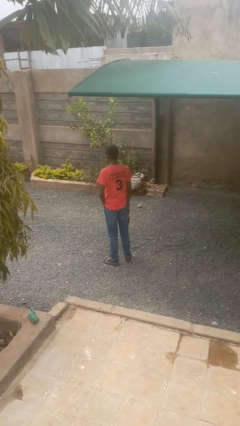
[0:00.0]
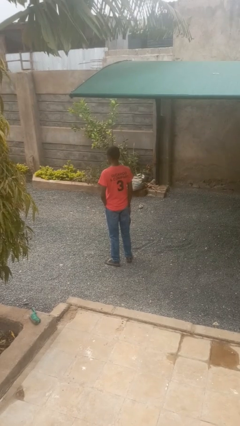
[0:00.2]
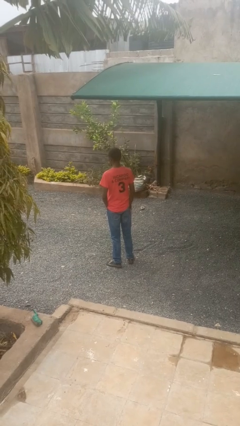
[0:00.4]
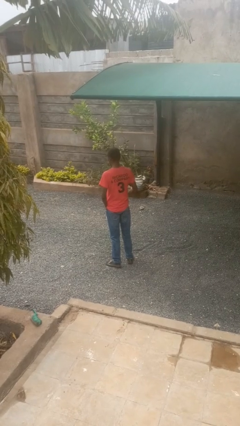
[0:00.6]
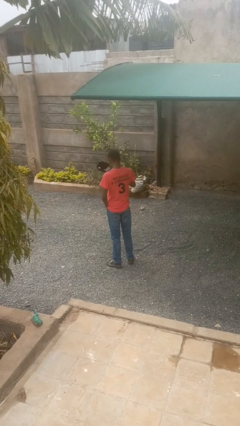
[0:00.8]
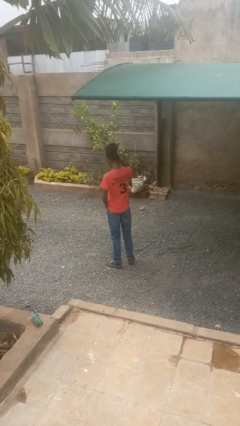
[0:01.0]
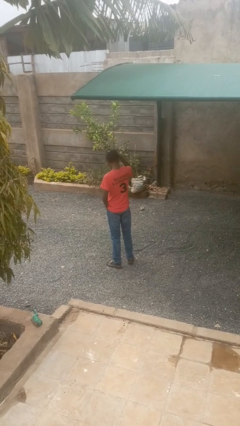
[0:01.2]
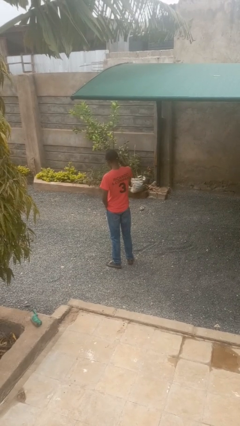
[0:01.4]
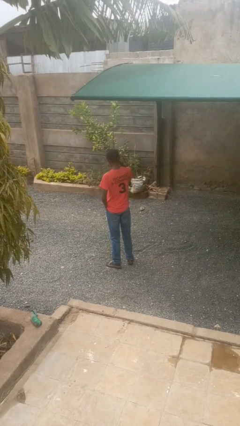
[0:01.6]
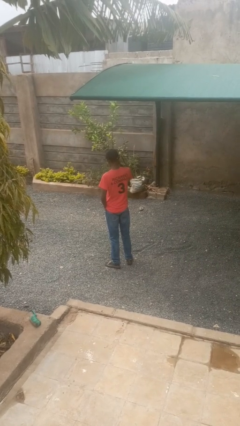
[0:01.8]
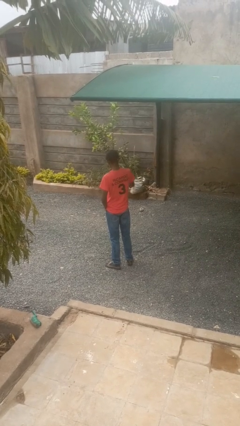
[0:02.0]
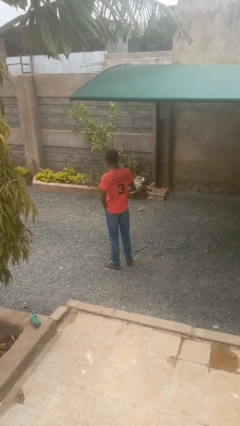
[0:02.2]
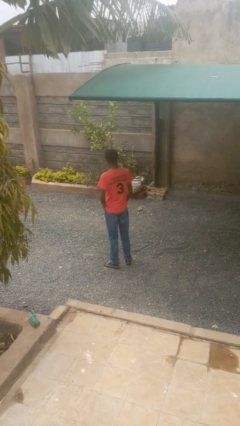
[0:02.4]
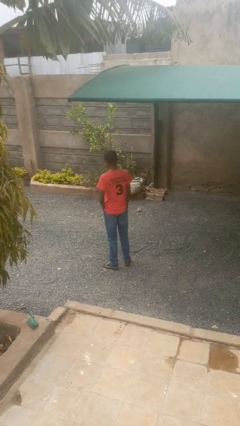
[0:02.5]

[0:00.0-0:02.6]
person puts on hat

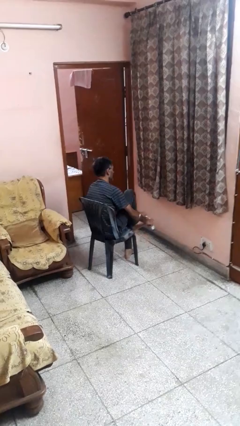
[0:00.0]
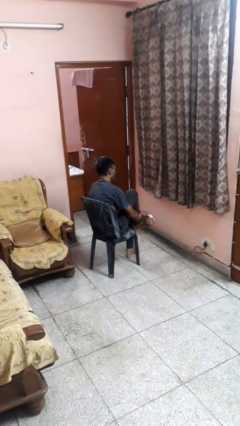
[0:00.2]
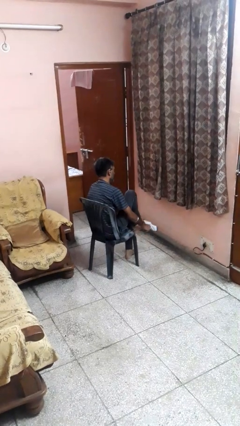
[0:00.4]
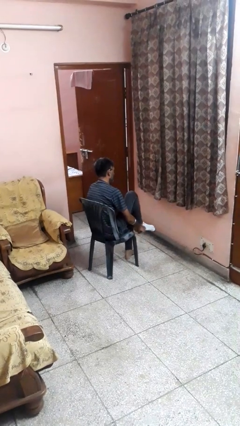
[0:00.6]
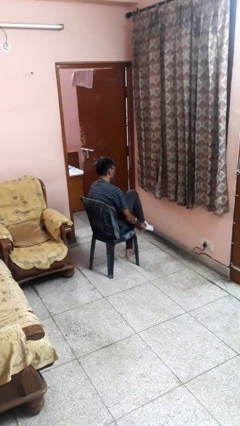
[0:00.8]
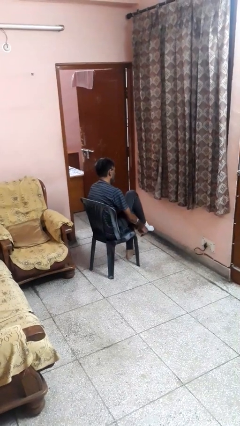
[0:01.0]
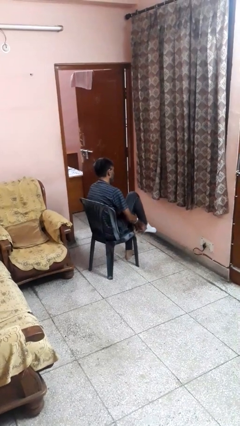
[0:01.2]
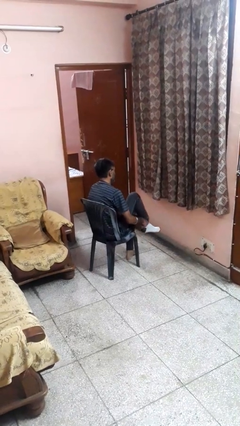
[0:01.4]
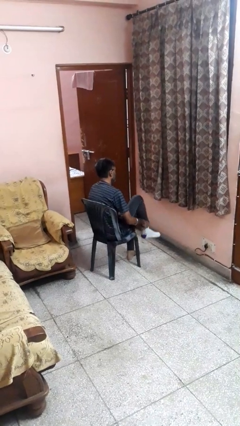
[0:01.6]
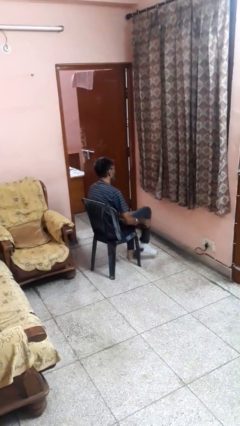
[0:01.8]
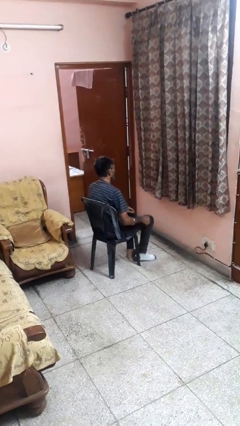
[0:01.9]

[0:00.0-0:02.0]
person puts on socks

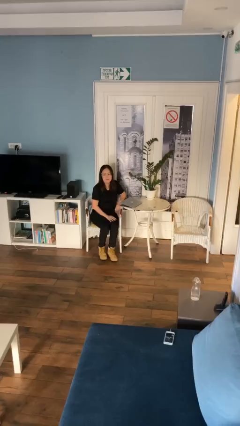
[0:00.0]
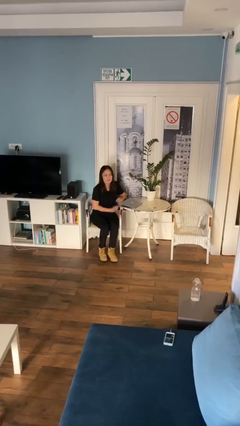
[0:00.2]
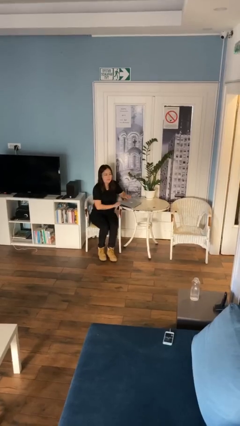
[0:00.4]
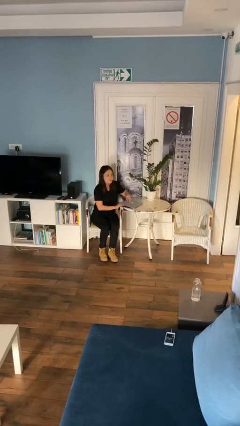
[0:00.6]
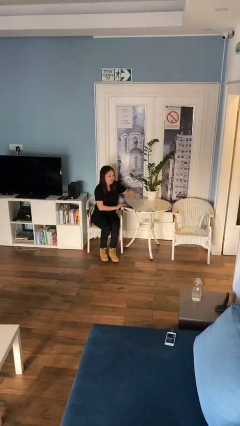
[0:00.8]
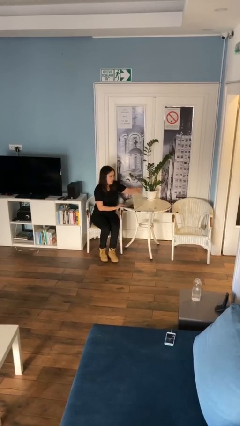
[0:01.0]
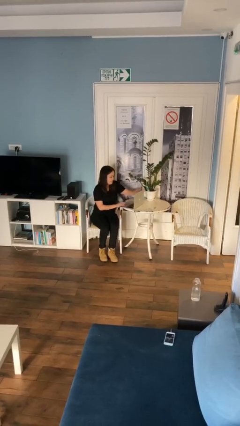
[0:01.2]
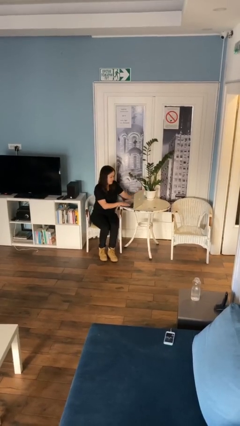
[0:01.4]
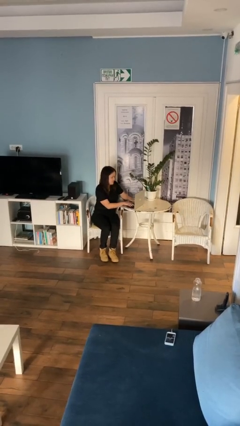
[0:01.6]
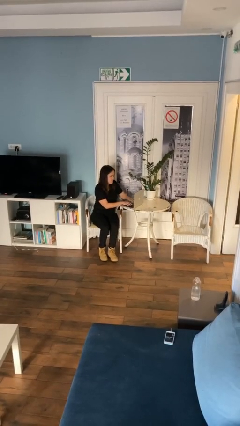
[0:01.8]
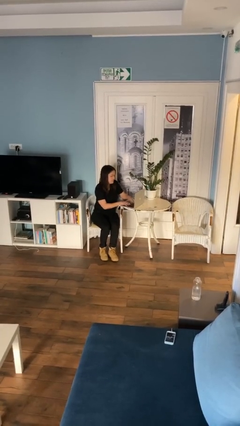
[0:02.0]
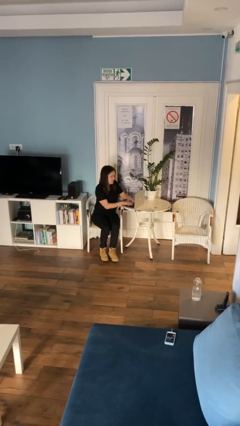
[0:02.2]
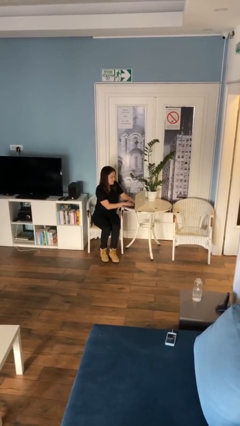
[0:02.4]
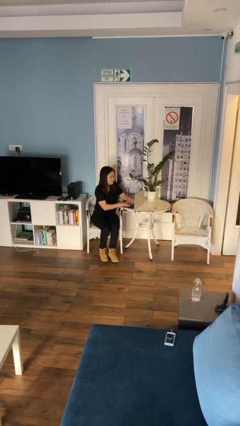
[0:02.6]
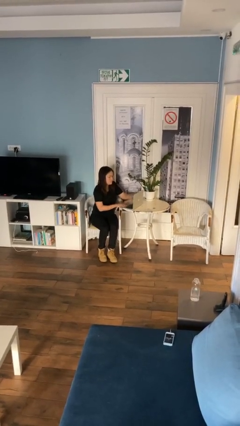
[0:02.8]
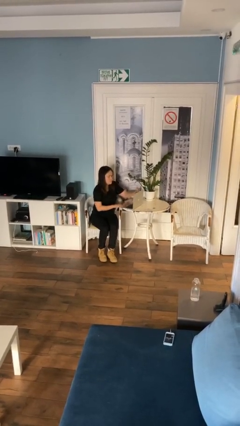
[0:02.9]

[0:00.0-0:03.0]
person interacts with laptop

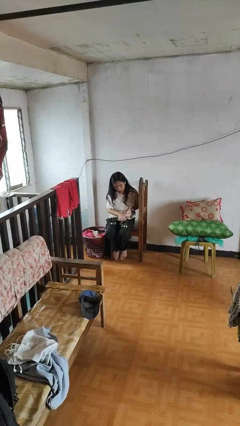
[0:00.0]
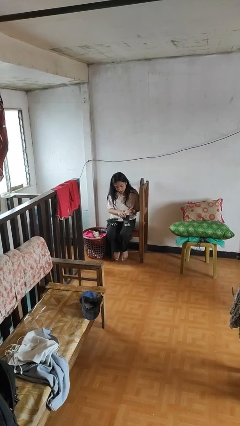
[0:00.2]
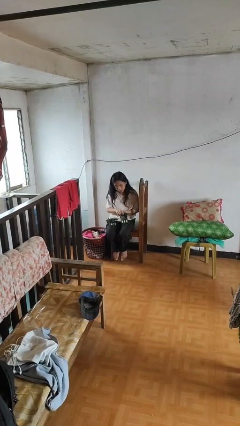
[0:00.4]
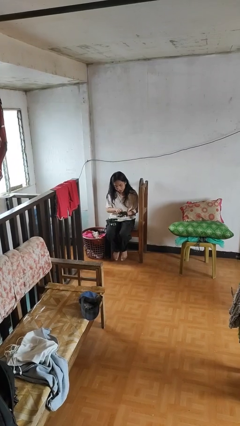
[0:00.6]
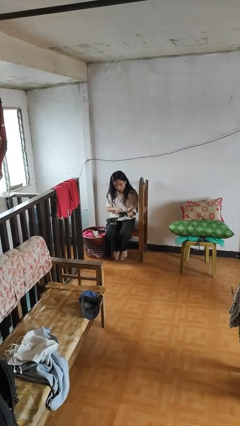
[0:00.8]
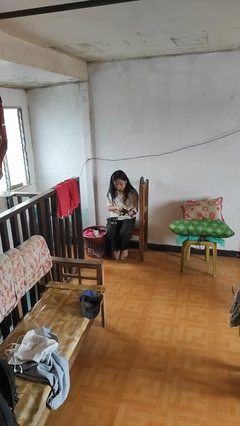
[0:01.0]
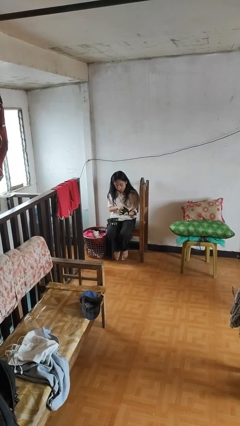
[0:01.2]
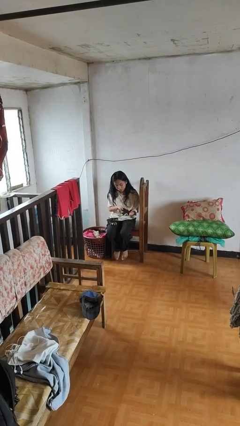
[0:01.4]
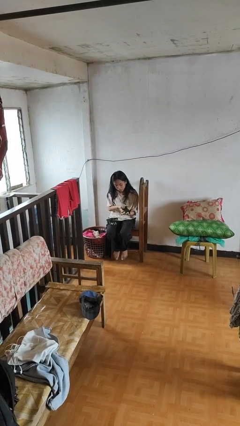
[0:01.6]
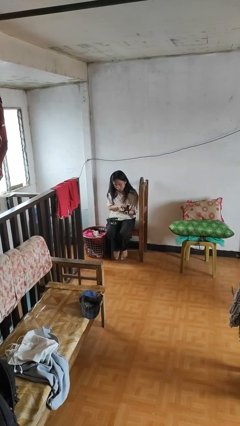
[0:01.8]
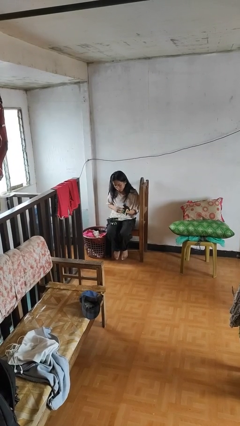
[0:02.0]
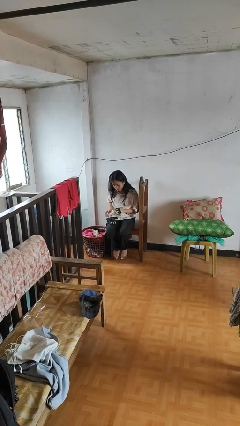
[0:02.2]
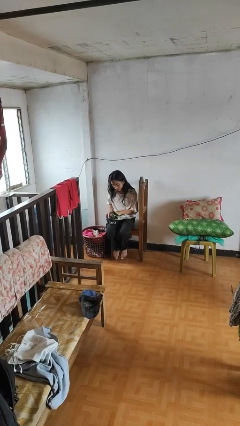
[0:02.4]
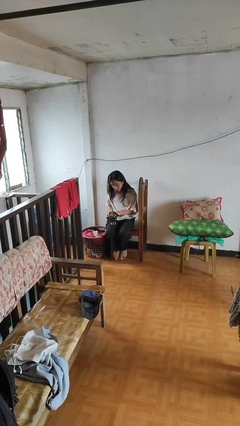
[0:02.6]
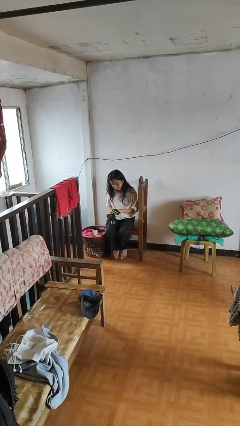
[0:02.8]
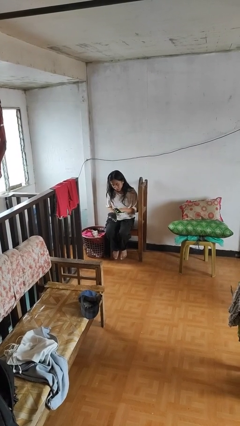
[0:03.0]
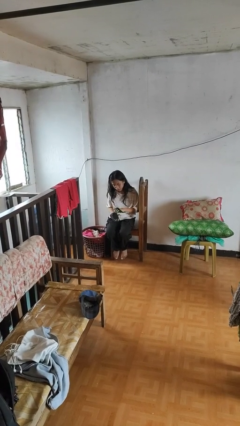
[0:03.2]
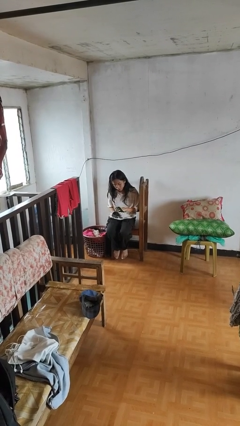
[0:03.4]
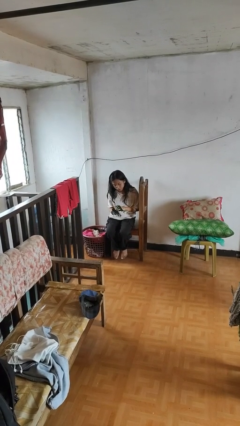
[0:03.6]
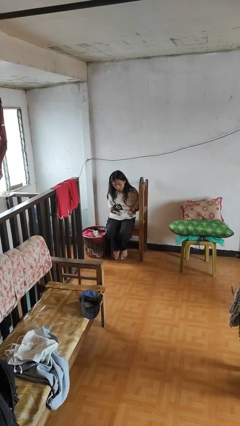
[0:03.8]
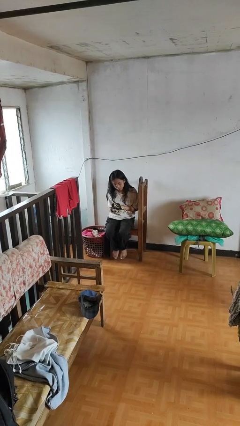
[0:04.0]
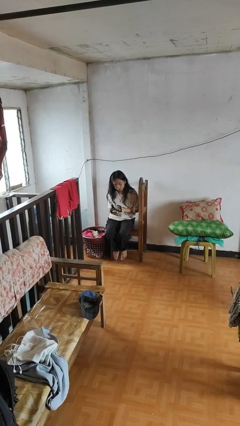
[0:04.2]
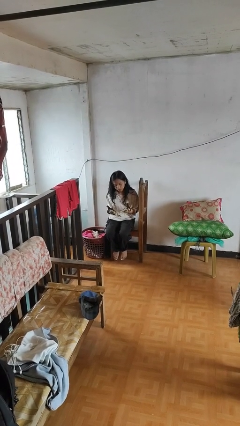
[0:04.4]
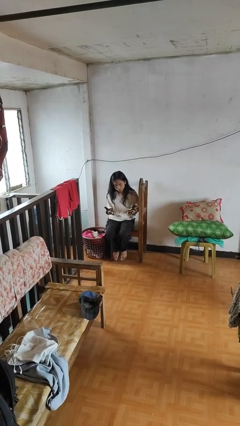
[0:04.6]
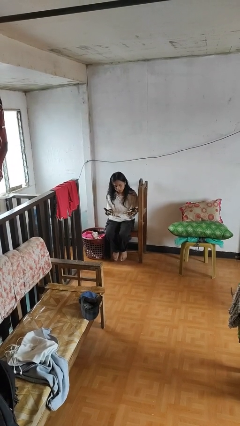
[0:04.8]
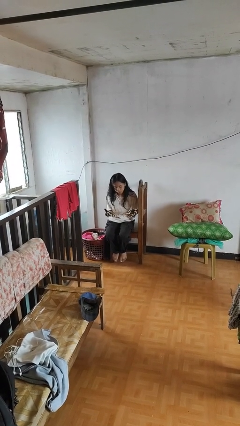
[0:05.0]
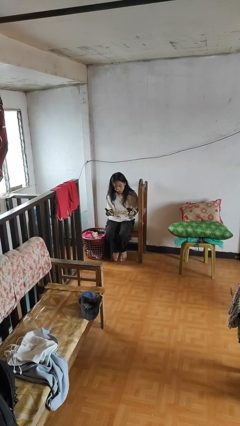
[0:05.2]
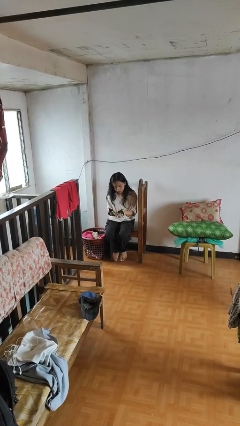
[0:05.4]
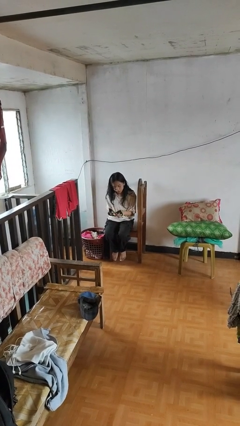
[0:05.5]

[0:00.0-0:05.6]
person puts on gloves

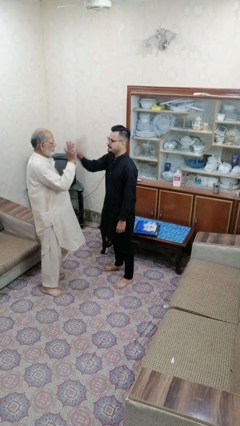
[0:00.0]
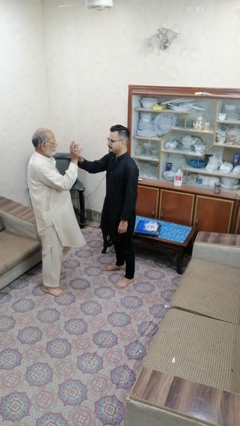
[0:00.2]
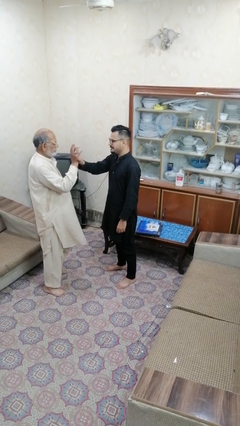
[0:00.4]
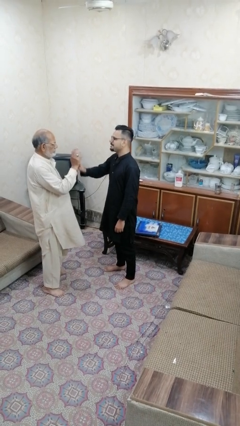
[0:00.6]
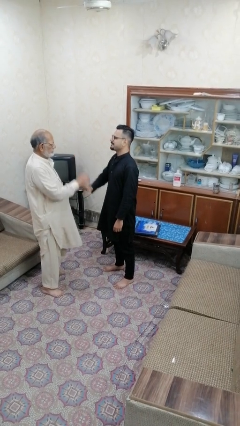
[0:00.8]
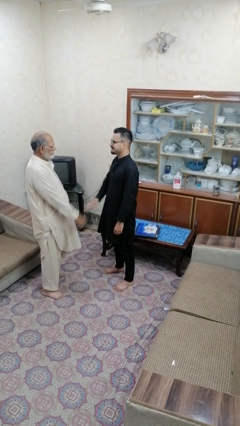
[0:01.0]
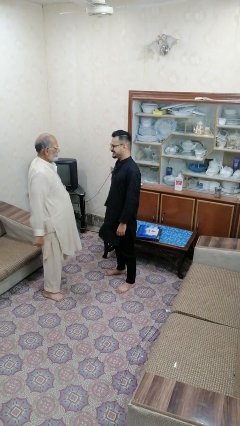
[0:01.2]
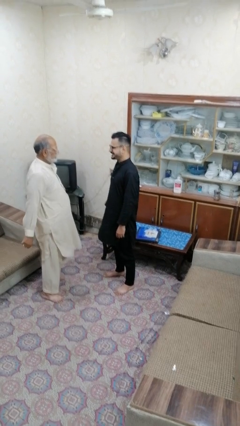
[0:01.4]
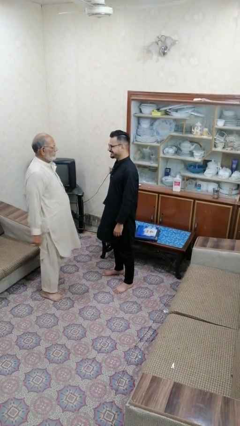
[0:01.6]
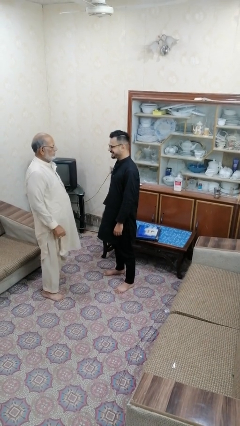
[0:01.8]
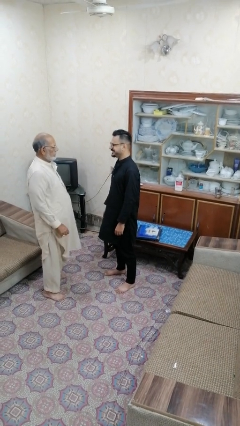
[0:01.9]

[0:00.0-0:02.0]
person highfives hand

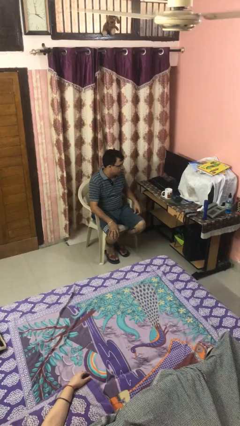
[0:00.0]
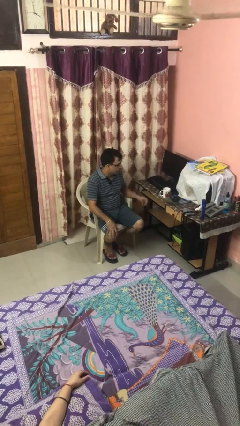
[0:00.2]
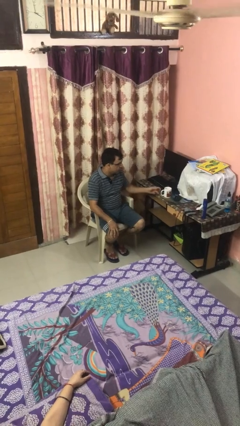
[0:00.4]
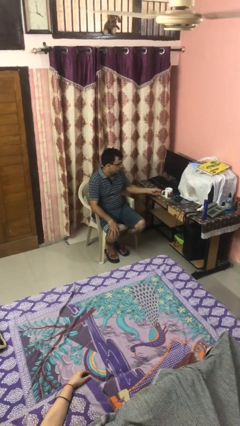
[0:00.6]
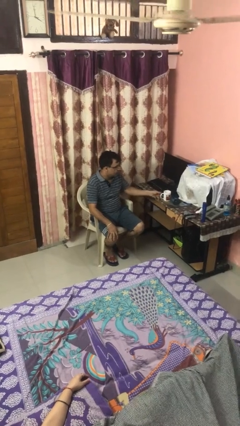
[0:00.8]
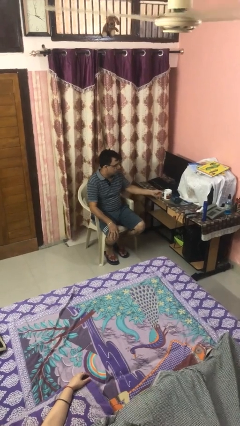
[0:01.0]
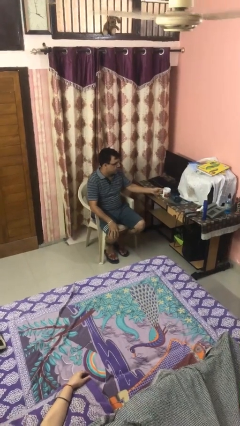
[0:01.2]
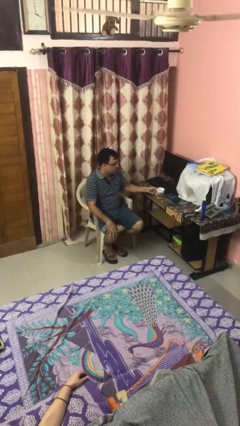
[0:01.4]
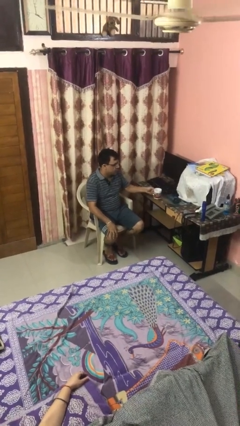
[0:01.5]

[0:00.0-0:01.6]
person picks up object from table

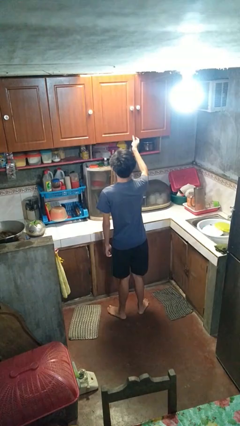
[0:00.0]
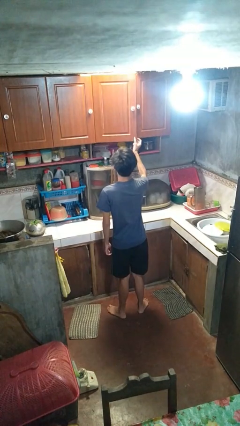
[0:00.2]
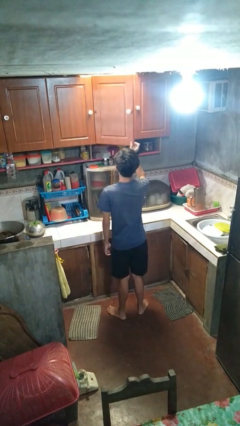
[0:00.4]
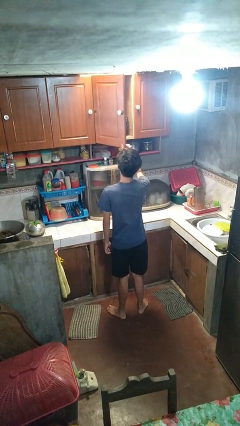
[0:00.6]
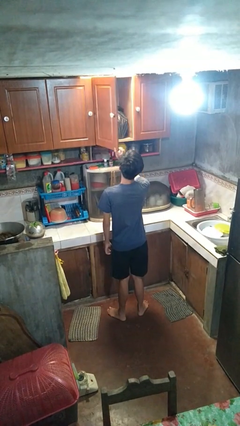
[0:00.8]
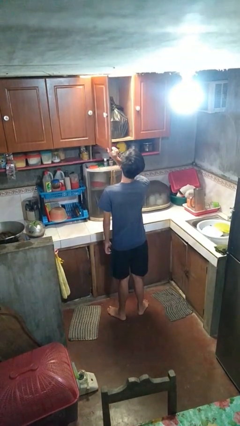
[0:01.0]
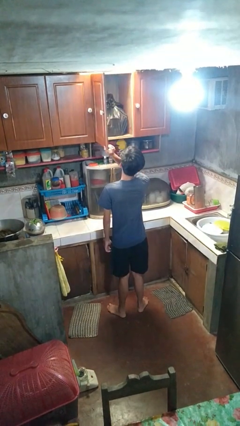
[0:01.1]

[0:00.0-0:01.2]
person opens cabinet
